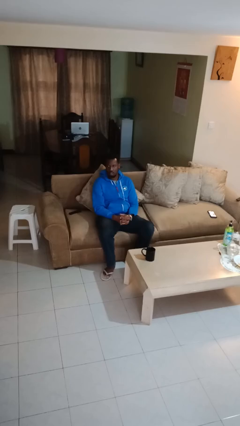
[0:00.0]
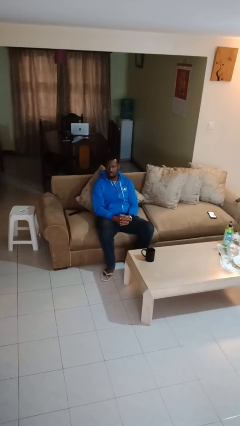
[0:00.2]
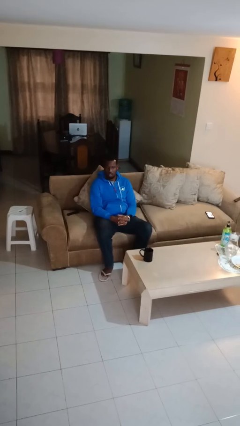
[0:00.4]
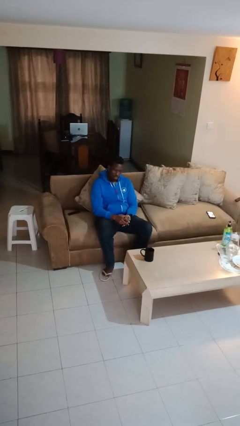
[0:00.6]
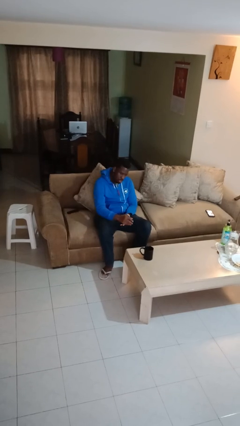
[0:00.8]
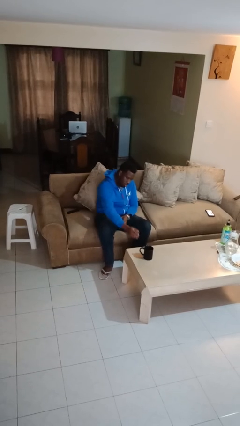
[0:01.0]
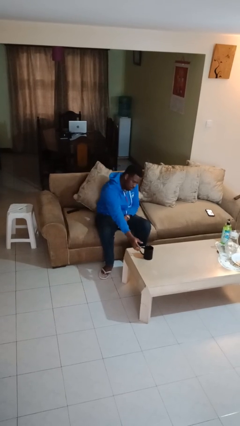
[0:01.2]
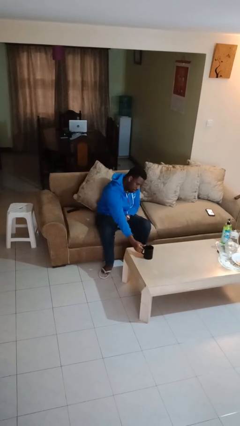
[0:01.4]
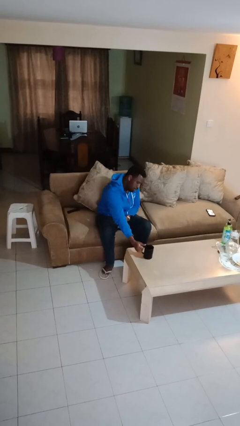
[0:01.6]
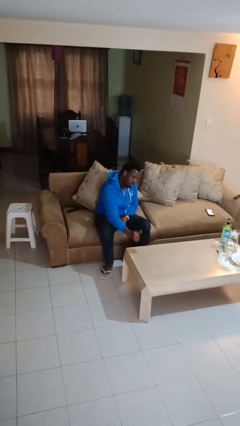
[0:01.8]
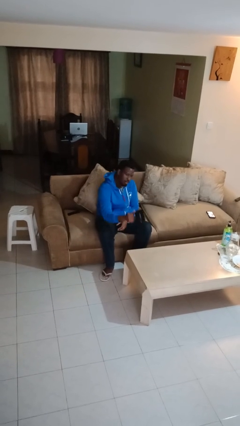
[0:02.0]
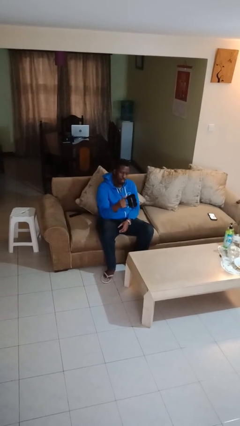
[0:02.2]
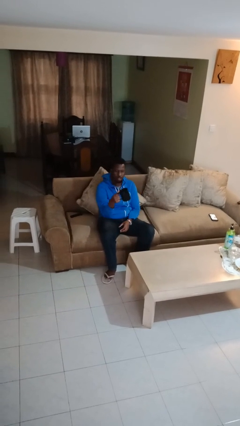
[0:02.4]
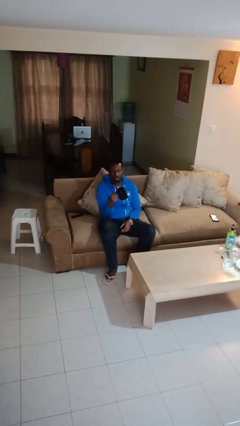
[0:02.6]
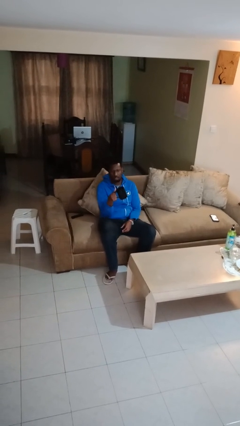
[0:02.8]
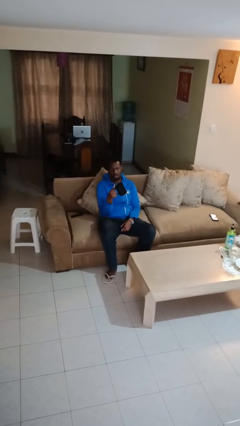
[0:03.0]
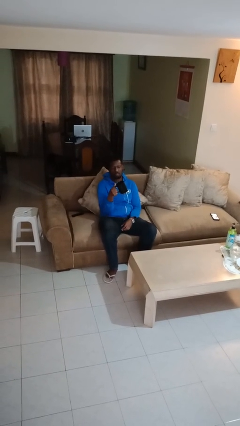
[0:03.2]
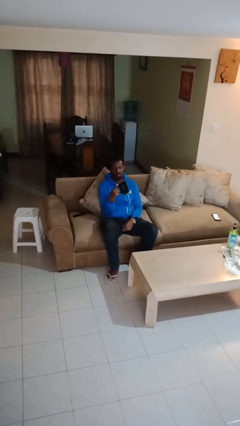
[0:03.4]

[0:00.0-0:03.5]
person picks up object from table

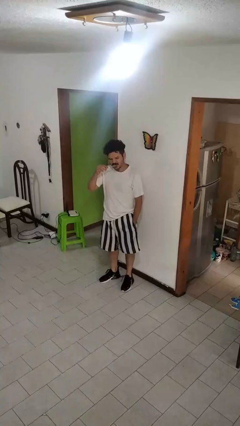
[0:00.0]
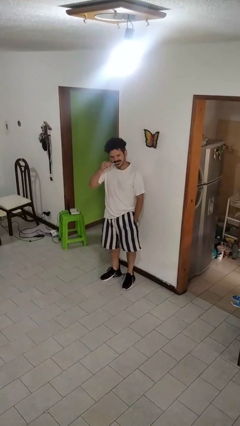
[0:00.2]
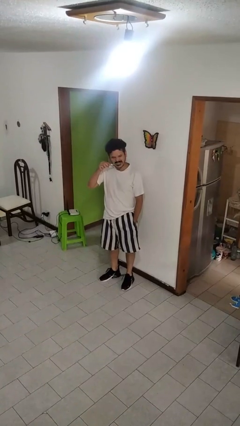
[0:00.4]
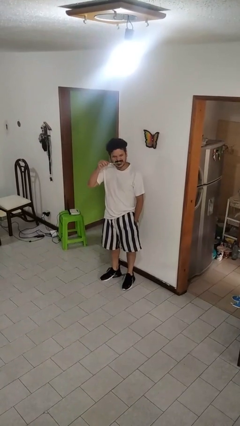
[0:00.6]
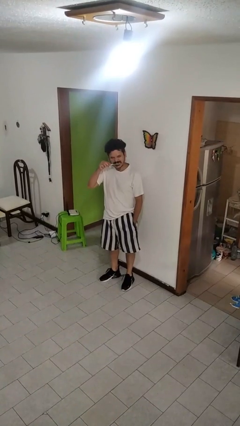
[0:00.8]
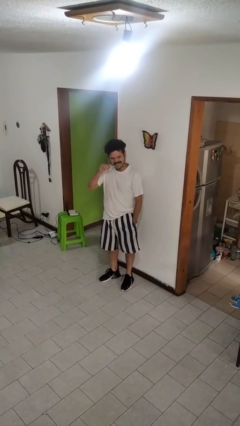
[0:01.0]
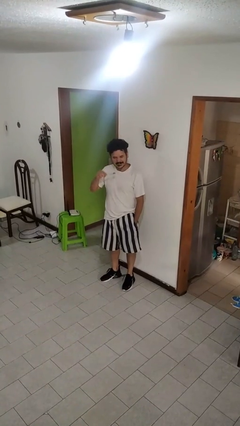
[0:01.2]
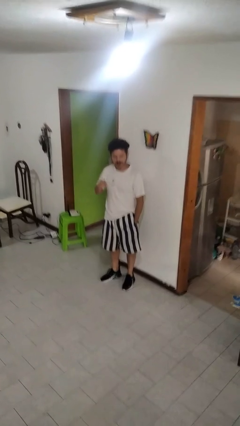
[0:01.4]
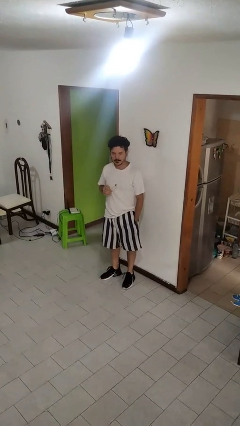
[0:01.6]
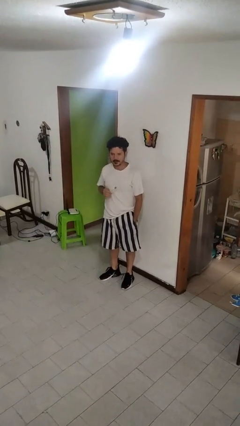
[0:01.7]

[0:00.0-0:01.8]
person brushes teeth

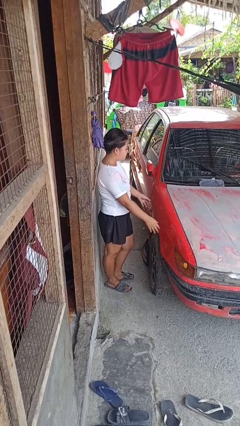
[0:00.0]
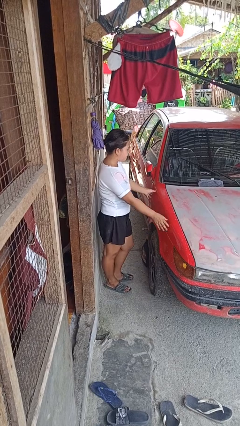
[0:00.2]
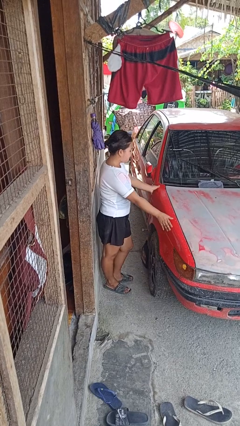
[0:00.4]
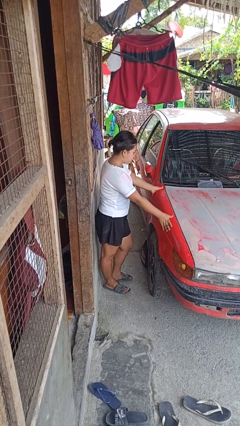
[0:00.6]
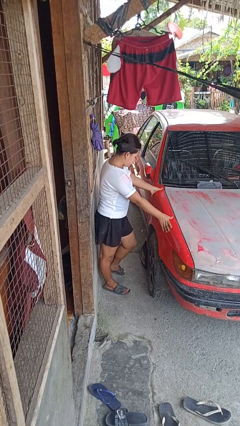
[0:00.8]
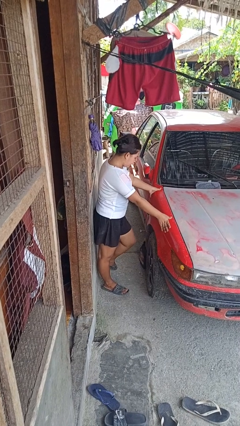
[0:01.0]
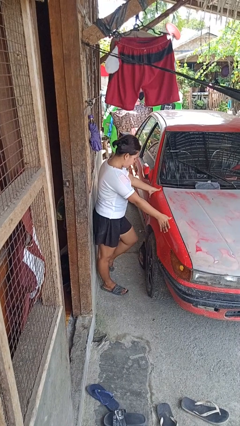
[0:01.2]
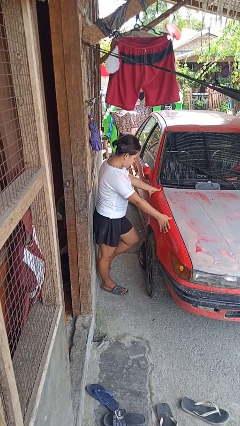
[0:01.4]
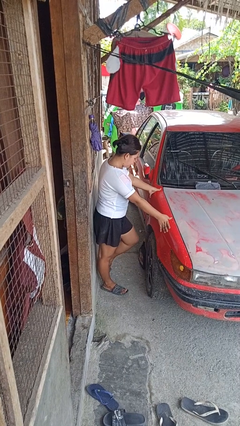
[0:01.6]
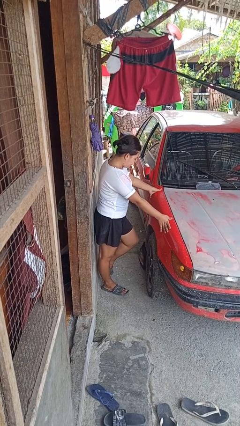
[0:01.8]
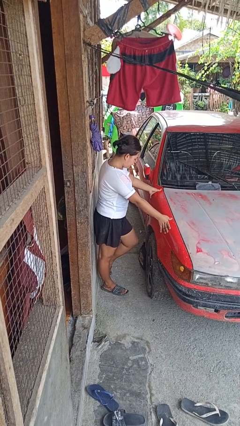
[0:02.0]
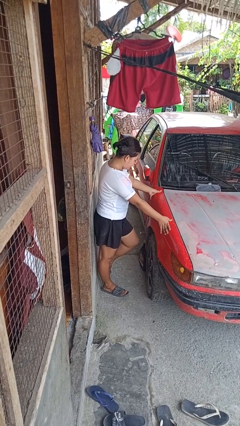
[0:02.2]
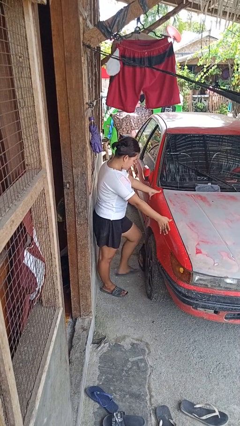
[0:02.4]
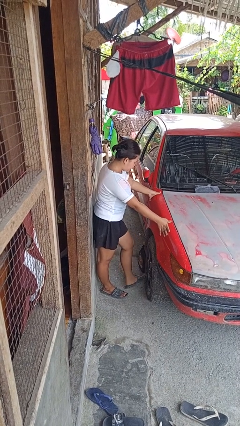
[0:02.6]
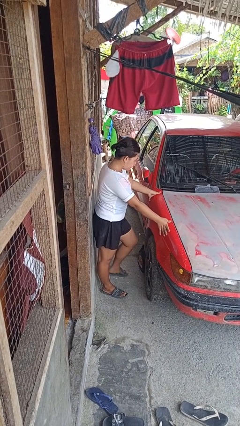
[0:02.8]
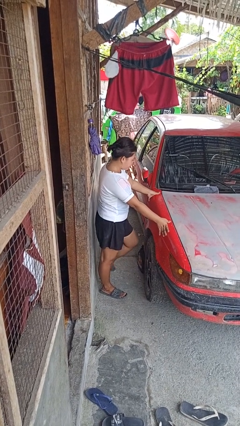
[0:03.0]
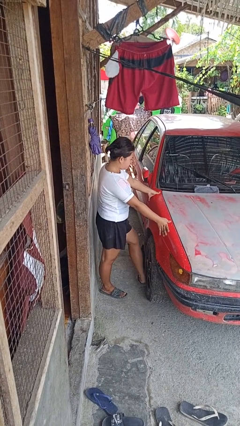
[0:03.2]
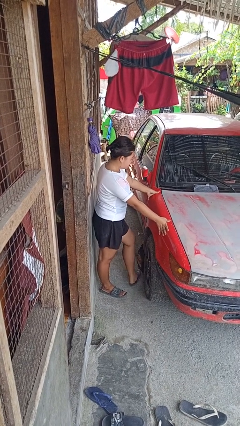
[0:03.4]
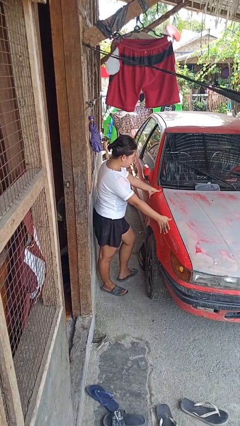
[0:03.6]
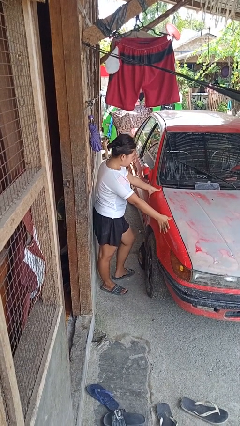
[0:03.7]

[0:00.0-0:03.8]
person kicks car tires

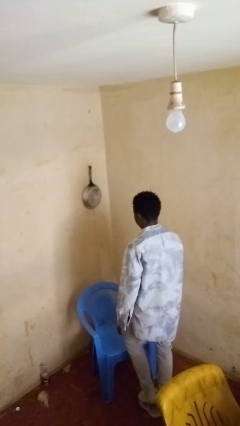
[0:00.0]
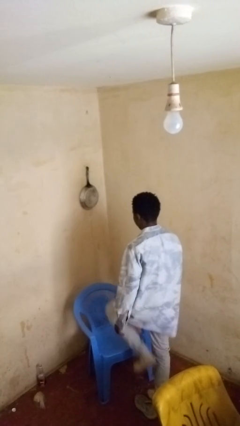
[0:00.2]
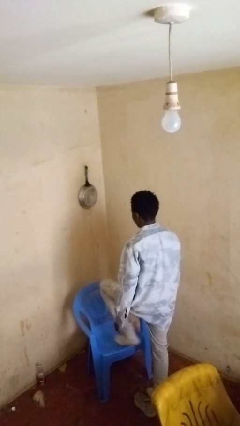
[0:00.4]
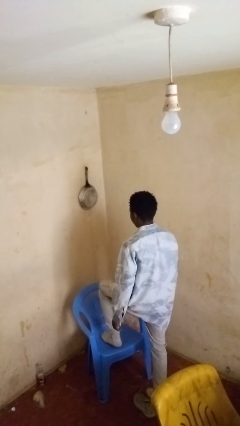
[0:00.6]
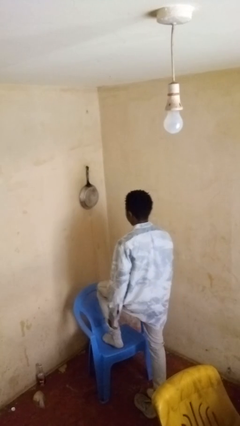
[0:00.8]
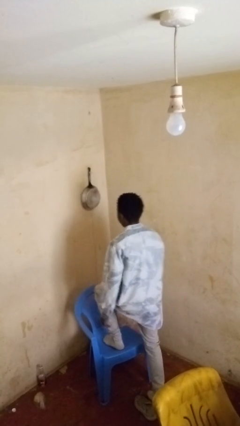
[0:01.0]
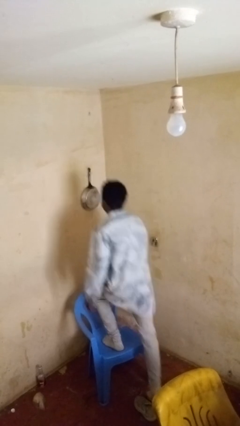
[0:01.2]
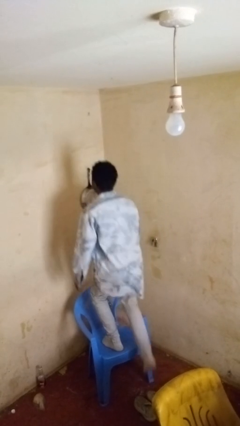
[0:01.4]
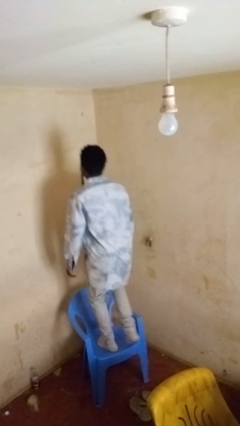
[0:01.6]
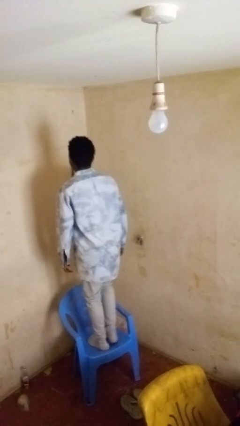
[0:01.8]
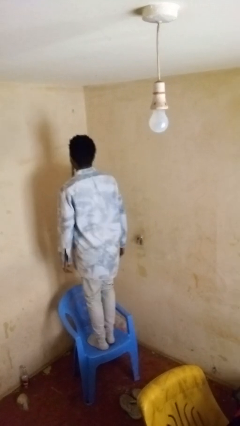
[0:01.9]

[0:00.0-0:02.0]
person climbs on chair

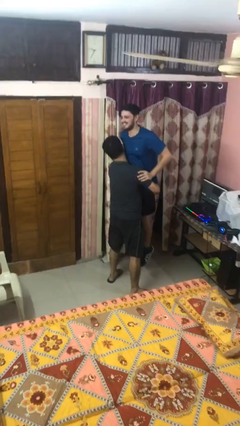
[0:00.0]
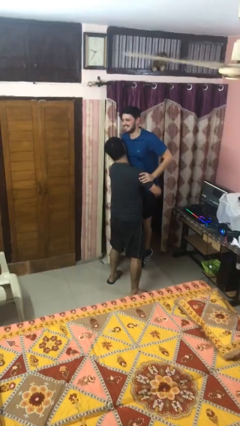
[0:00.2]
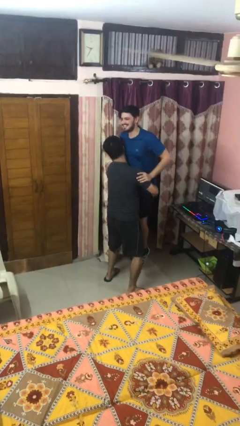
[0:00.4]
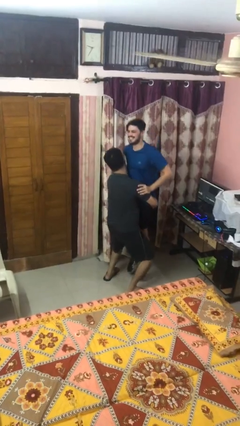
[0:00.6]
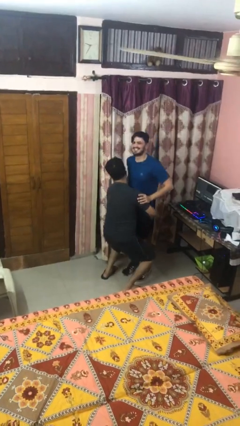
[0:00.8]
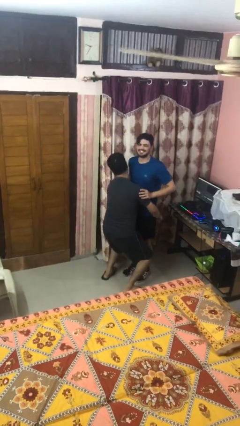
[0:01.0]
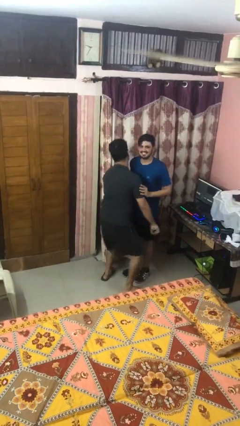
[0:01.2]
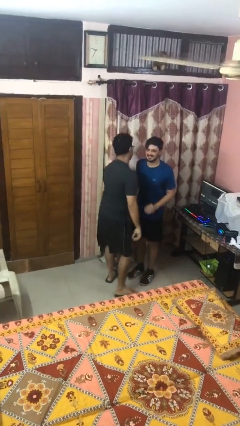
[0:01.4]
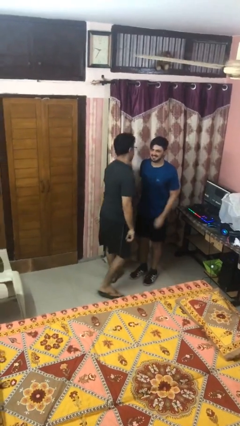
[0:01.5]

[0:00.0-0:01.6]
person puts down person

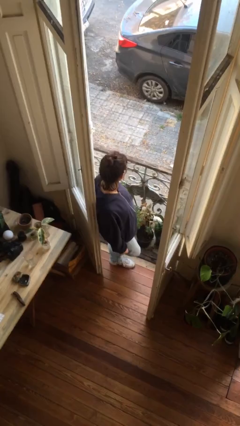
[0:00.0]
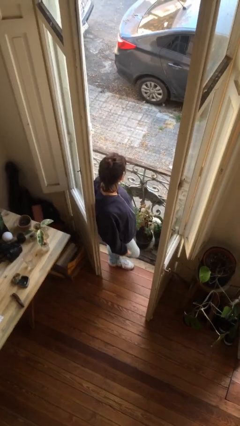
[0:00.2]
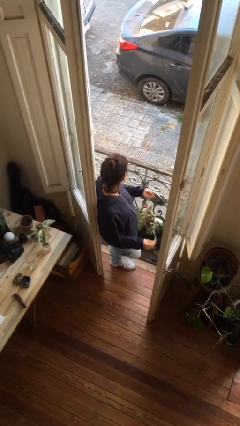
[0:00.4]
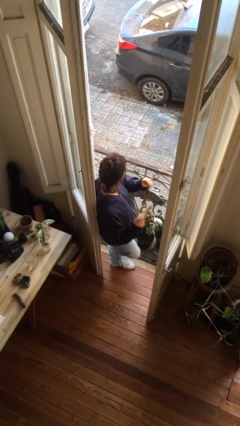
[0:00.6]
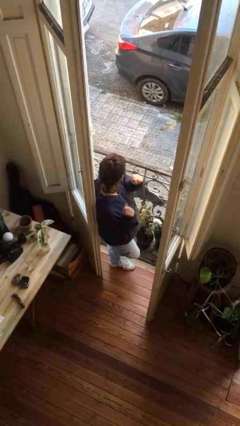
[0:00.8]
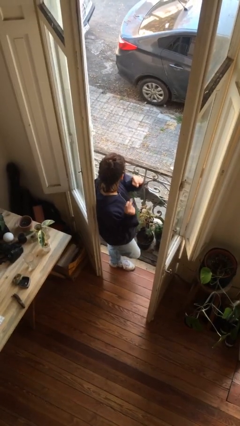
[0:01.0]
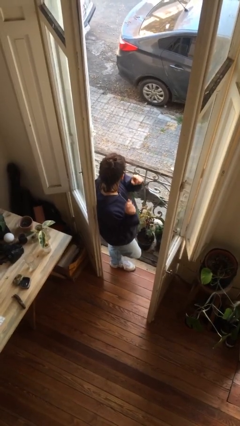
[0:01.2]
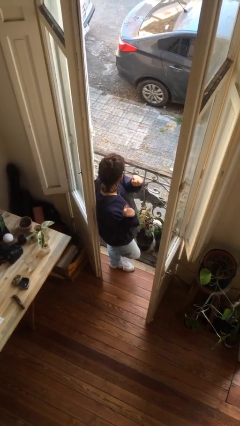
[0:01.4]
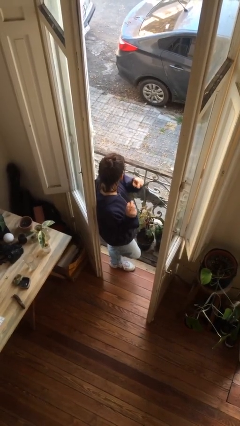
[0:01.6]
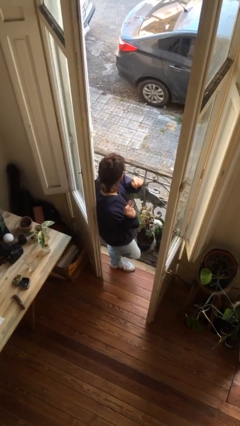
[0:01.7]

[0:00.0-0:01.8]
person snaps fingers

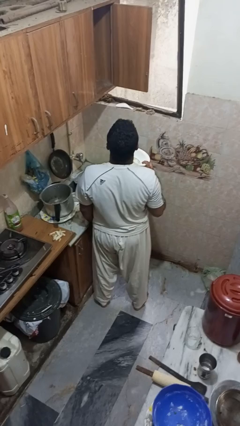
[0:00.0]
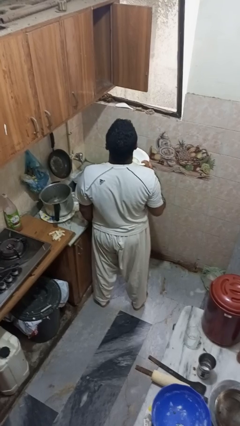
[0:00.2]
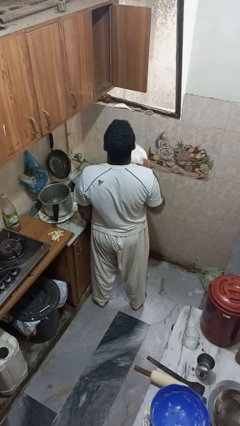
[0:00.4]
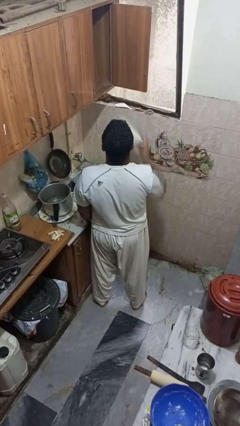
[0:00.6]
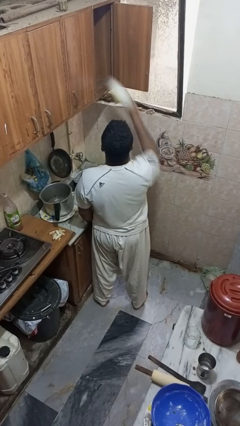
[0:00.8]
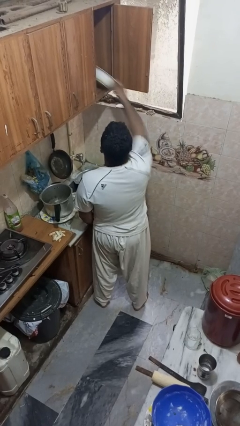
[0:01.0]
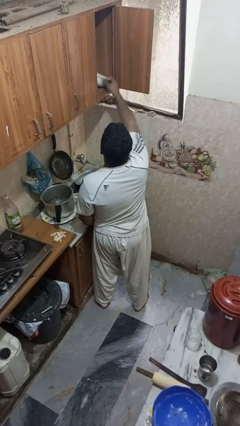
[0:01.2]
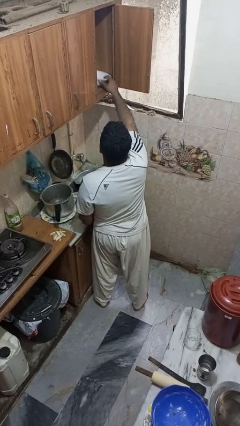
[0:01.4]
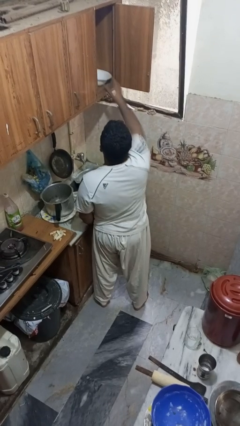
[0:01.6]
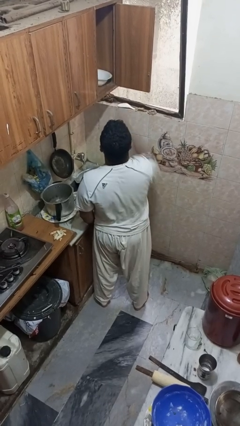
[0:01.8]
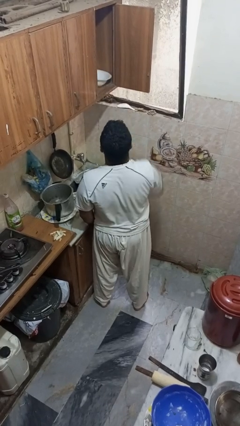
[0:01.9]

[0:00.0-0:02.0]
person puts object in cabinet

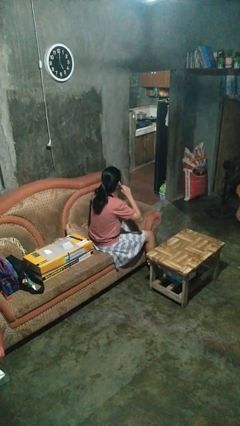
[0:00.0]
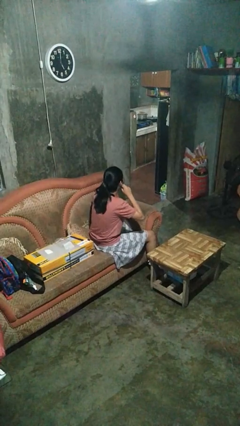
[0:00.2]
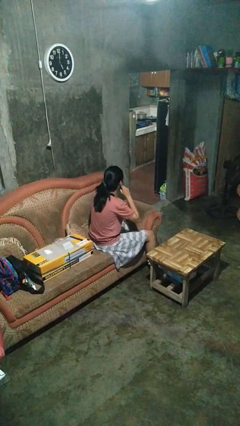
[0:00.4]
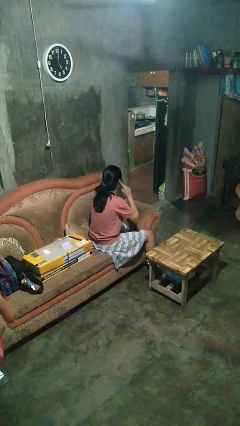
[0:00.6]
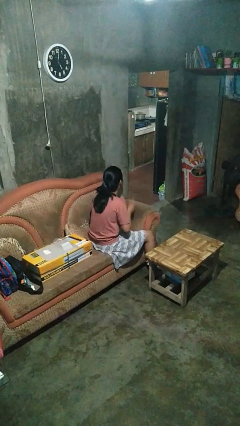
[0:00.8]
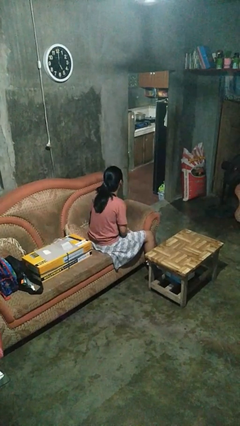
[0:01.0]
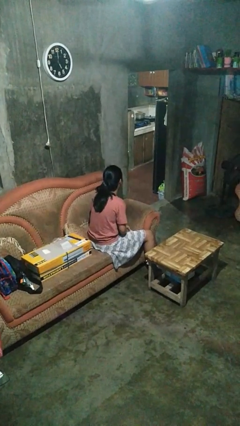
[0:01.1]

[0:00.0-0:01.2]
person puts fingers in ear
